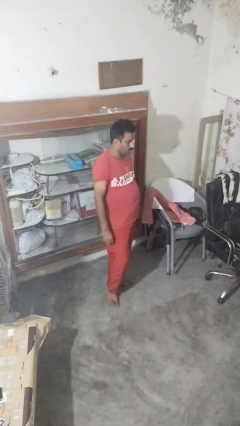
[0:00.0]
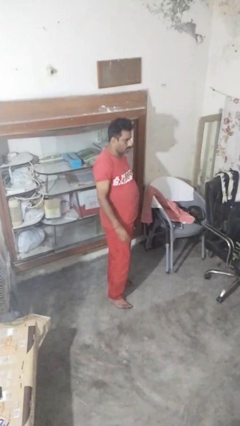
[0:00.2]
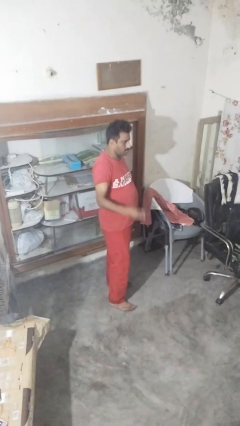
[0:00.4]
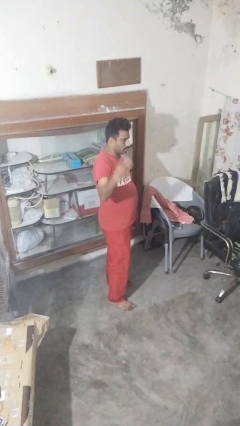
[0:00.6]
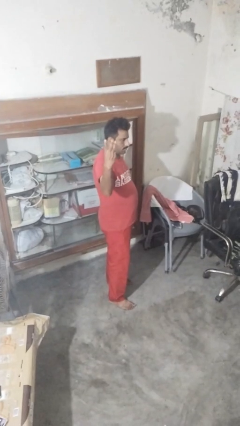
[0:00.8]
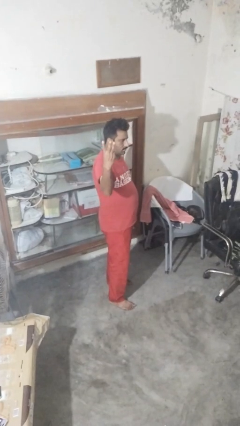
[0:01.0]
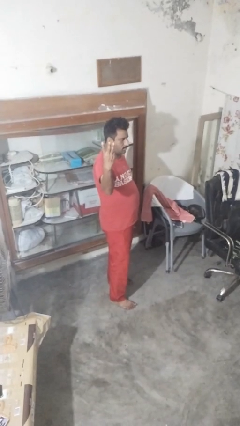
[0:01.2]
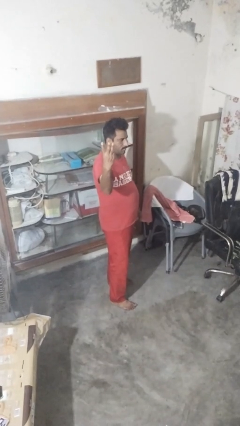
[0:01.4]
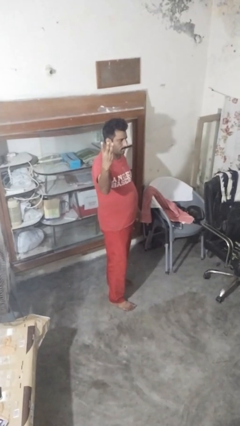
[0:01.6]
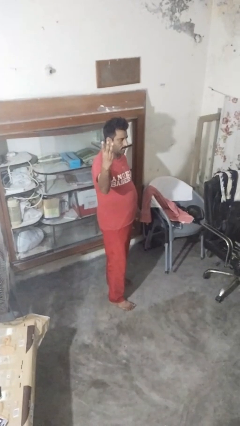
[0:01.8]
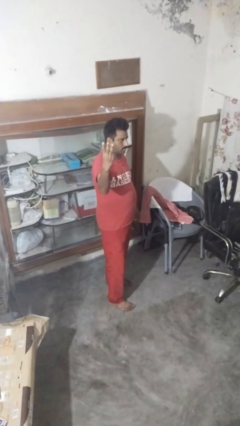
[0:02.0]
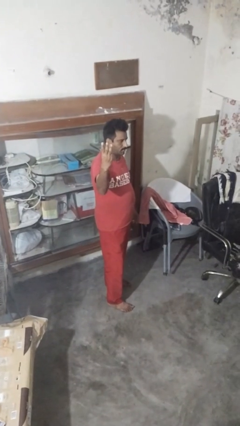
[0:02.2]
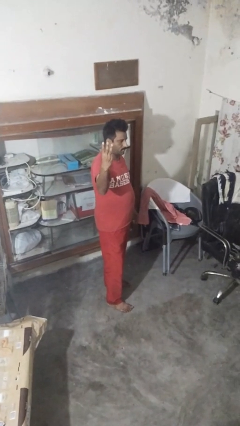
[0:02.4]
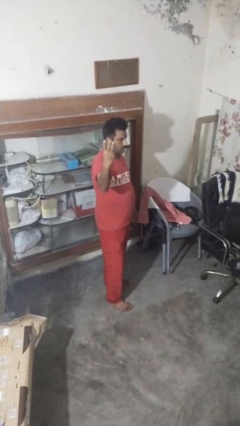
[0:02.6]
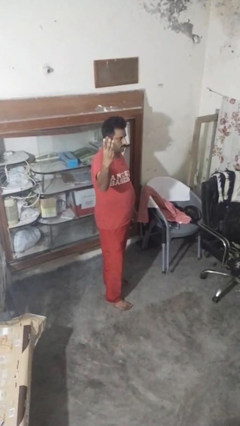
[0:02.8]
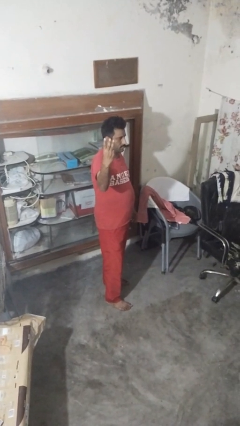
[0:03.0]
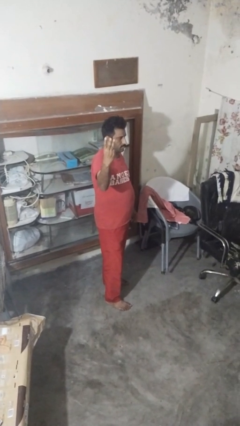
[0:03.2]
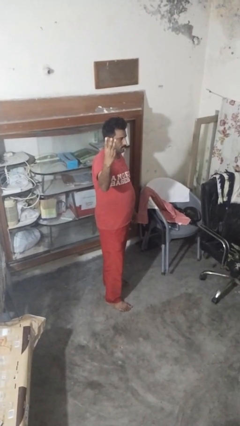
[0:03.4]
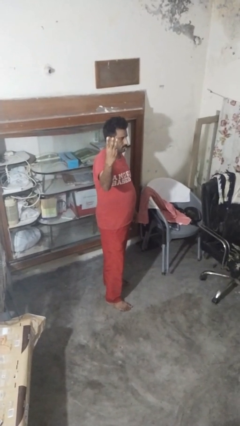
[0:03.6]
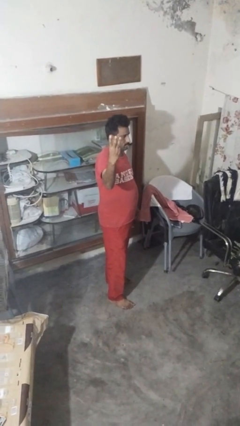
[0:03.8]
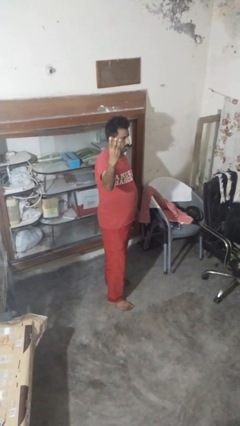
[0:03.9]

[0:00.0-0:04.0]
person gestures number three

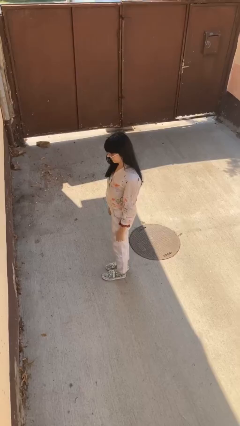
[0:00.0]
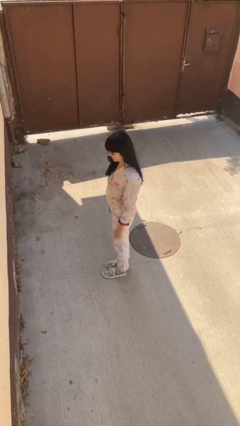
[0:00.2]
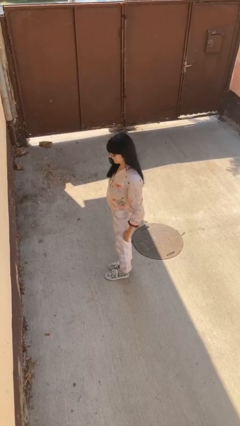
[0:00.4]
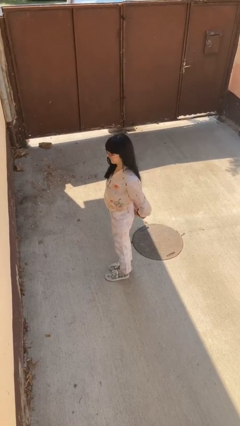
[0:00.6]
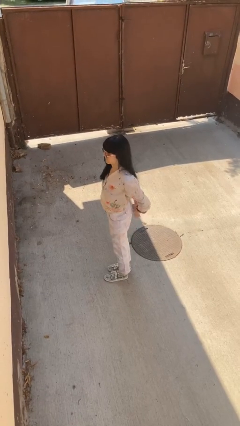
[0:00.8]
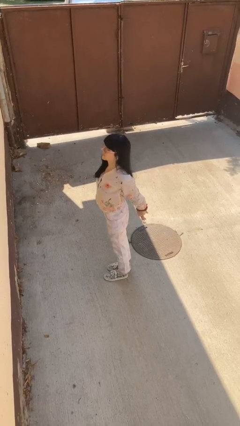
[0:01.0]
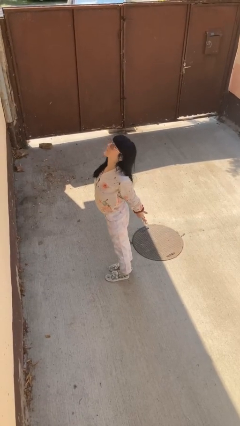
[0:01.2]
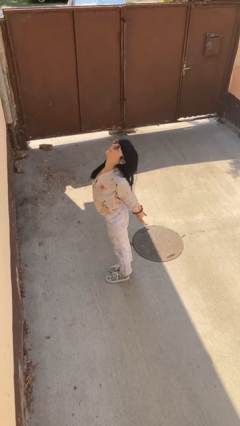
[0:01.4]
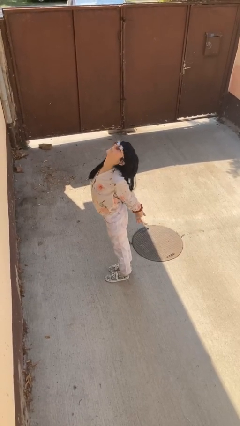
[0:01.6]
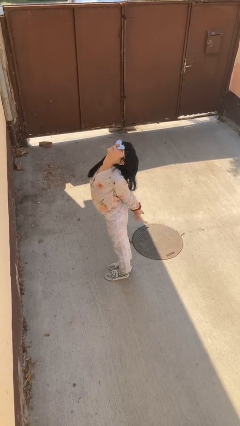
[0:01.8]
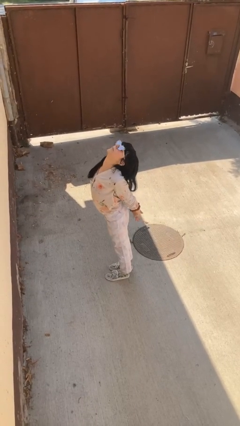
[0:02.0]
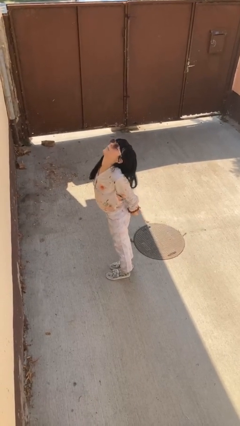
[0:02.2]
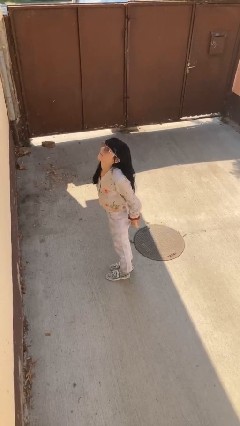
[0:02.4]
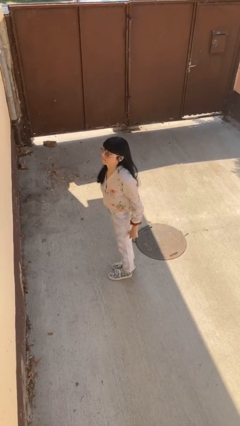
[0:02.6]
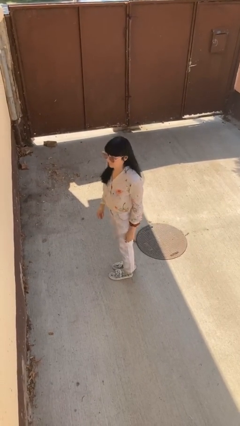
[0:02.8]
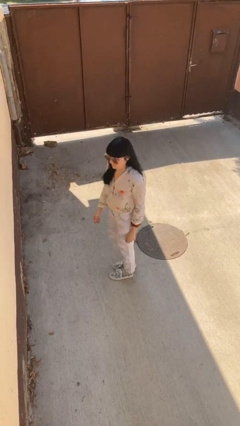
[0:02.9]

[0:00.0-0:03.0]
person stretches back

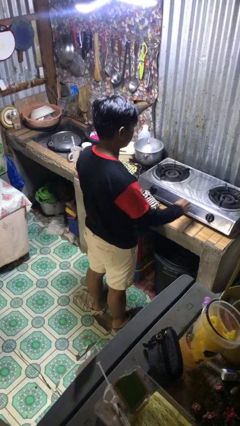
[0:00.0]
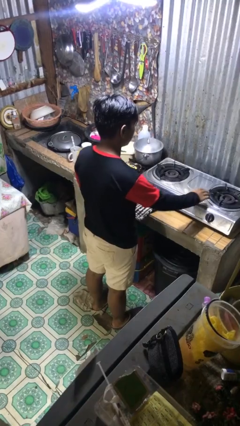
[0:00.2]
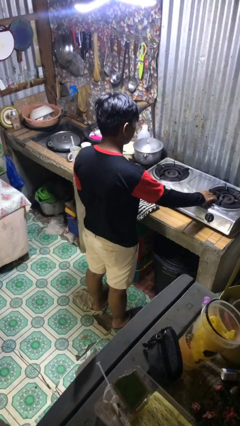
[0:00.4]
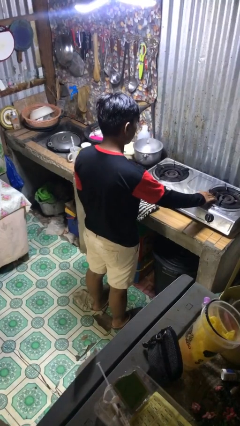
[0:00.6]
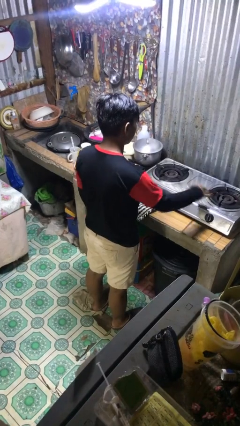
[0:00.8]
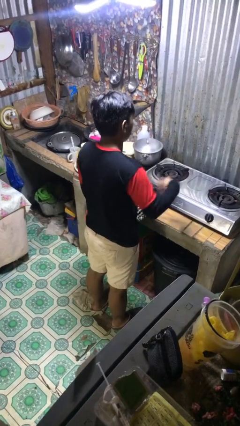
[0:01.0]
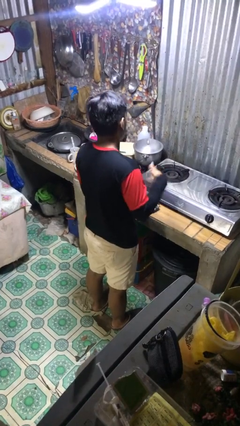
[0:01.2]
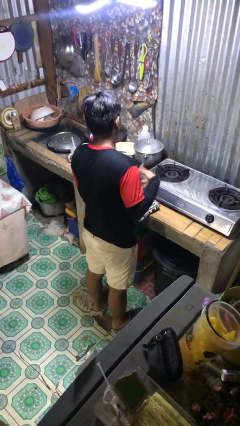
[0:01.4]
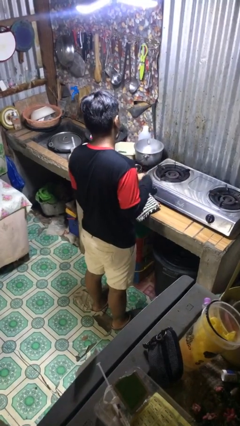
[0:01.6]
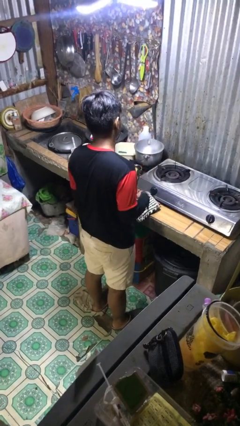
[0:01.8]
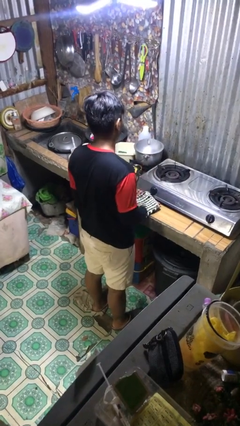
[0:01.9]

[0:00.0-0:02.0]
person burns hand

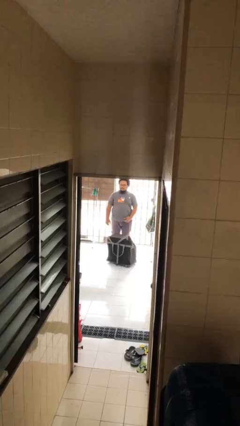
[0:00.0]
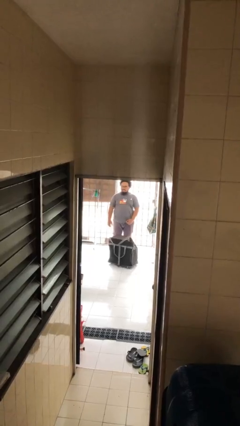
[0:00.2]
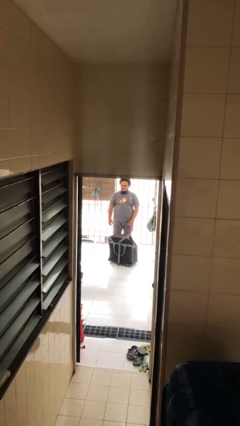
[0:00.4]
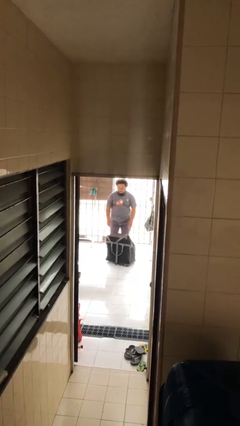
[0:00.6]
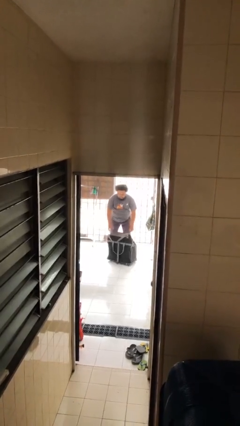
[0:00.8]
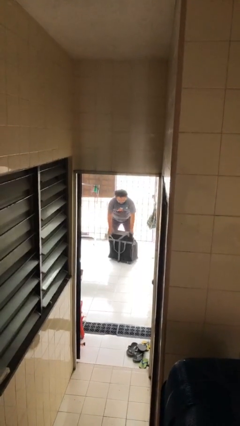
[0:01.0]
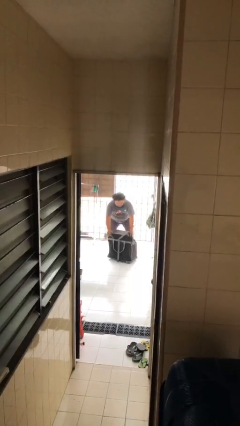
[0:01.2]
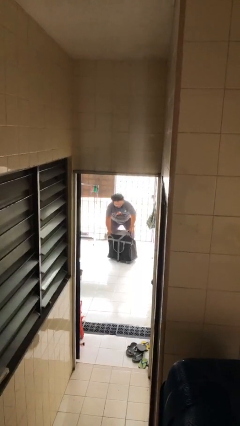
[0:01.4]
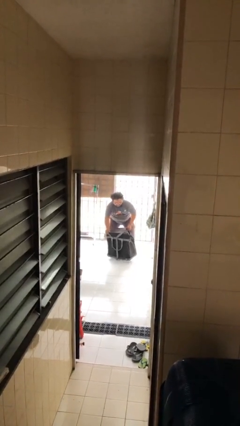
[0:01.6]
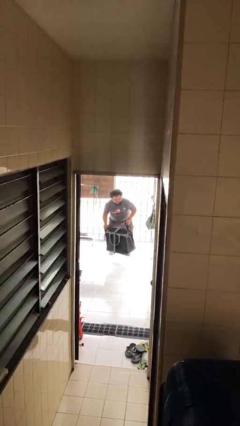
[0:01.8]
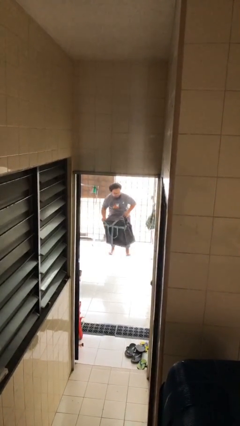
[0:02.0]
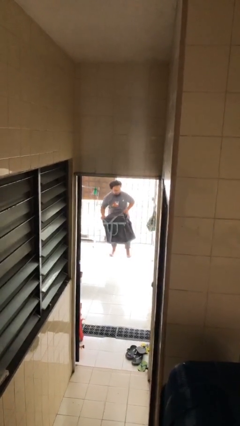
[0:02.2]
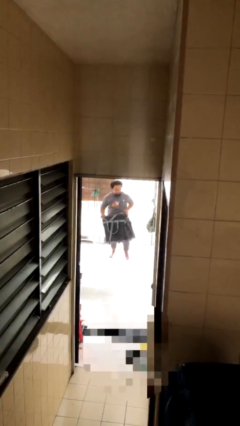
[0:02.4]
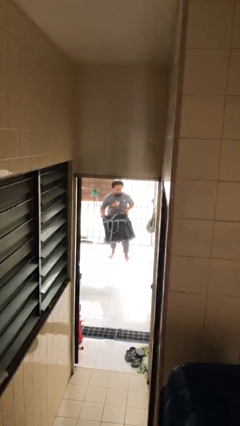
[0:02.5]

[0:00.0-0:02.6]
person picks up object from floor

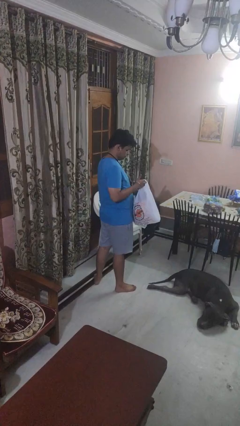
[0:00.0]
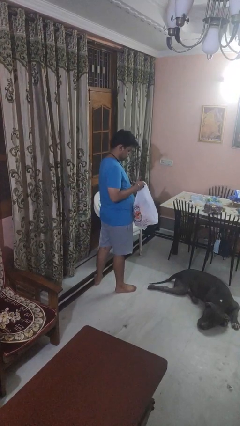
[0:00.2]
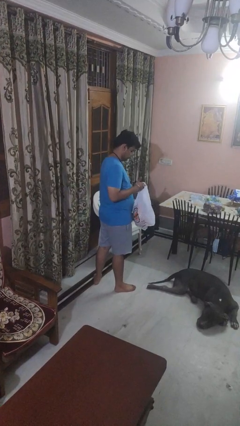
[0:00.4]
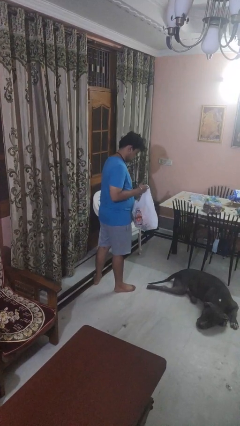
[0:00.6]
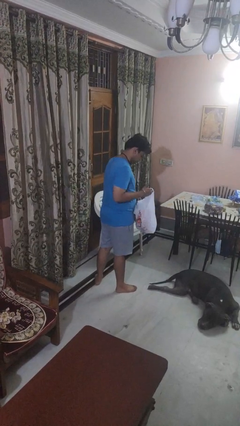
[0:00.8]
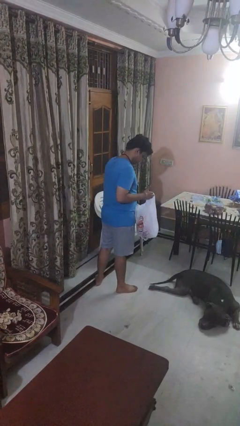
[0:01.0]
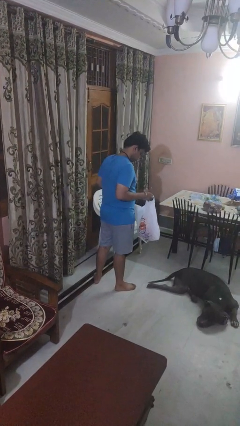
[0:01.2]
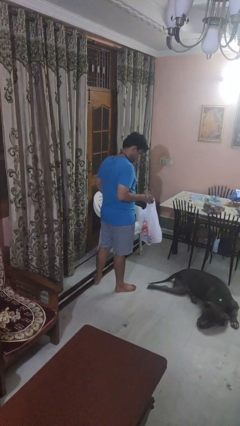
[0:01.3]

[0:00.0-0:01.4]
person puts object into bag

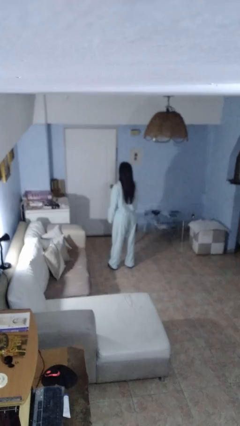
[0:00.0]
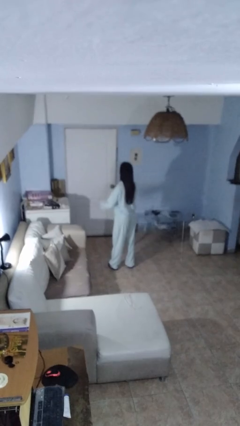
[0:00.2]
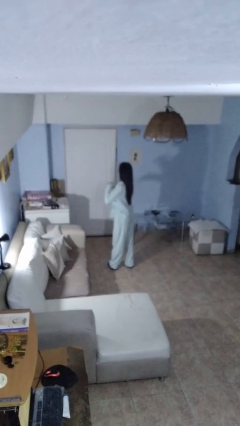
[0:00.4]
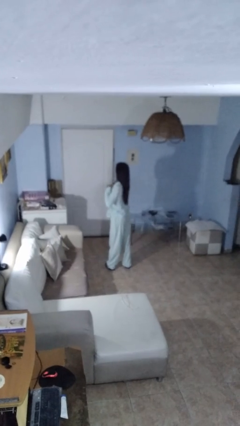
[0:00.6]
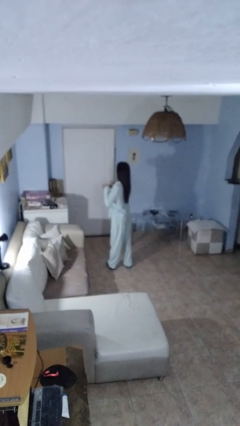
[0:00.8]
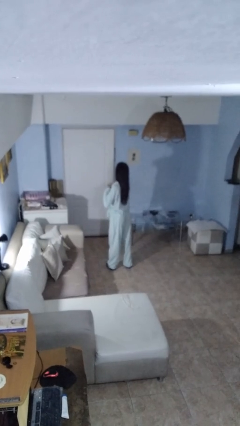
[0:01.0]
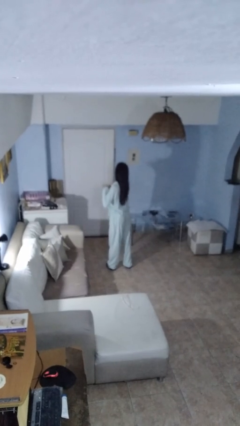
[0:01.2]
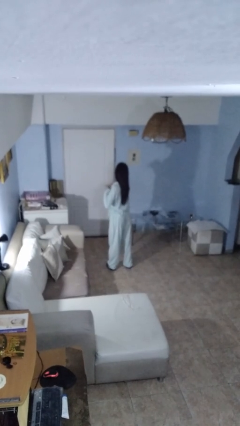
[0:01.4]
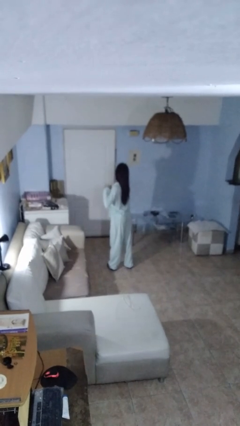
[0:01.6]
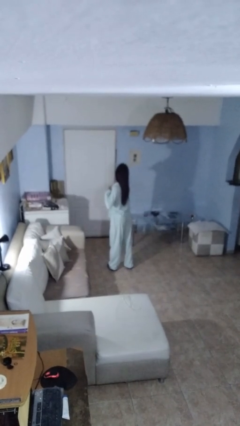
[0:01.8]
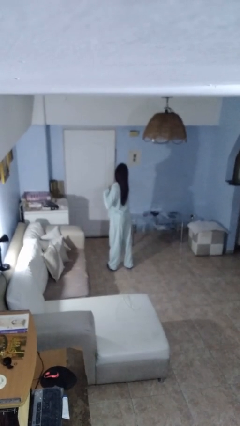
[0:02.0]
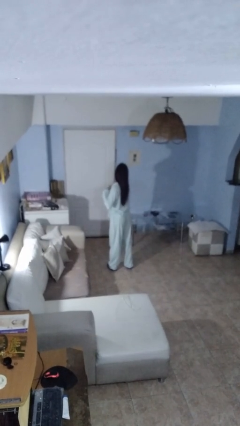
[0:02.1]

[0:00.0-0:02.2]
person drums on chest

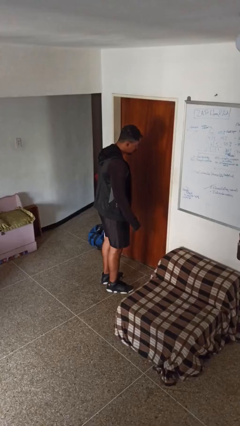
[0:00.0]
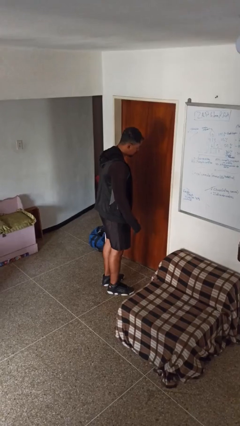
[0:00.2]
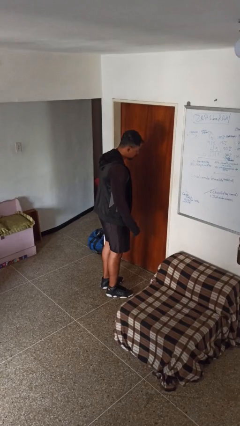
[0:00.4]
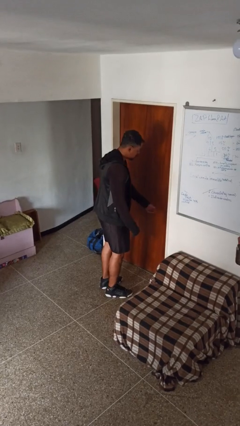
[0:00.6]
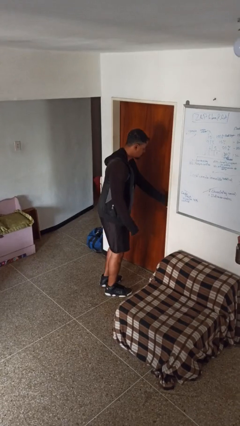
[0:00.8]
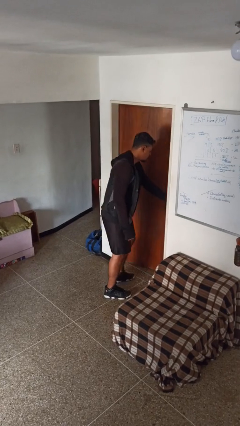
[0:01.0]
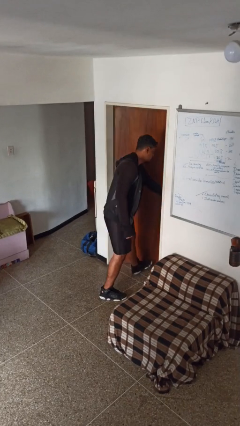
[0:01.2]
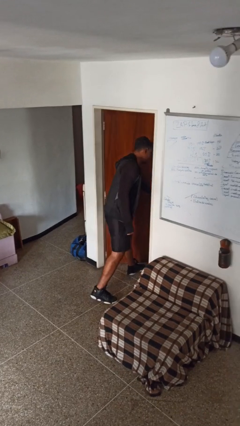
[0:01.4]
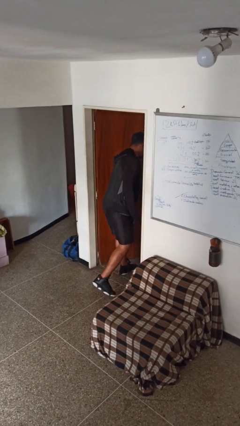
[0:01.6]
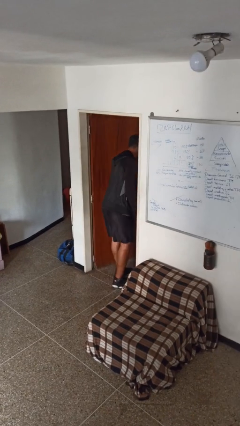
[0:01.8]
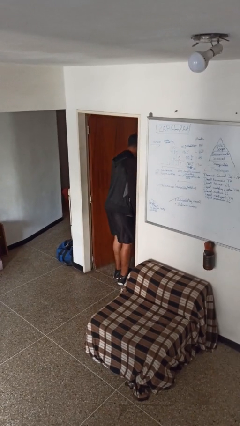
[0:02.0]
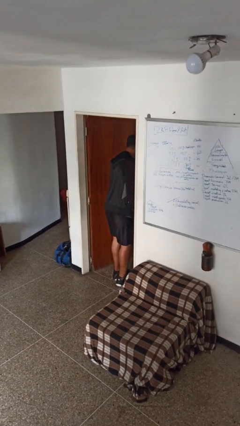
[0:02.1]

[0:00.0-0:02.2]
person opens facility door
